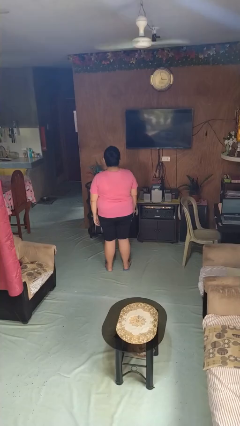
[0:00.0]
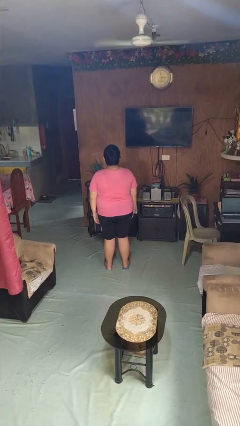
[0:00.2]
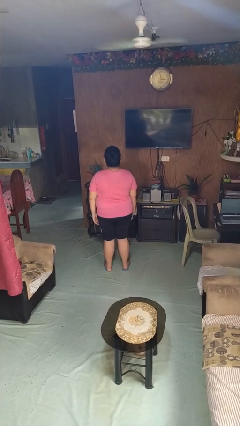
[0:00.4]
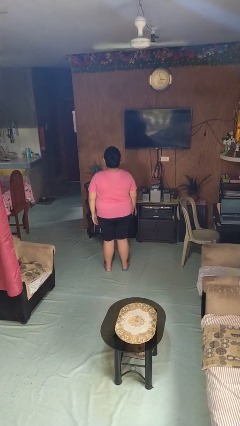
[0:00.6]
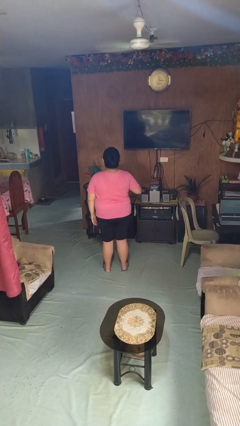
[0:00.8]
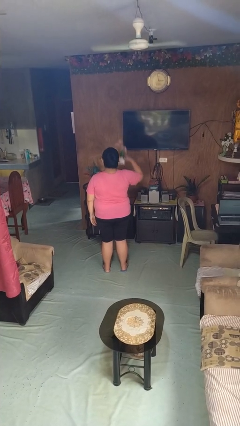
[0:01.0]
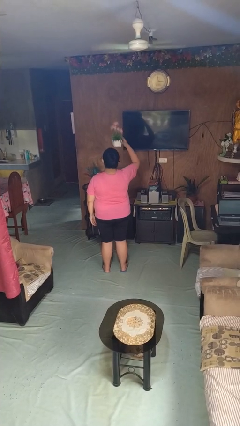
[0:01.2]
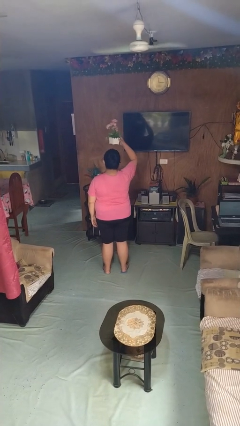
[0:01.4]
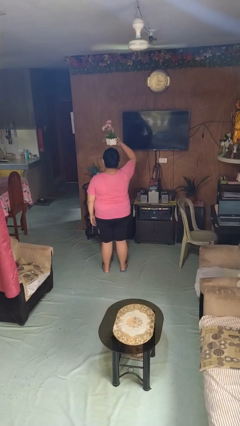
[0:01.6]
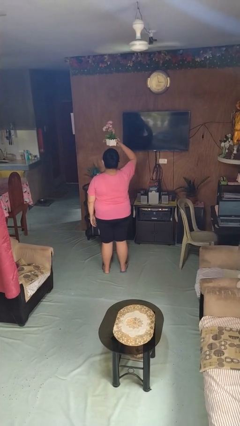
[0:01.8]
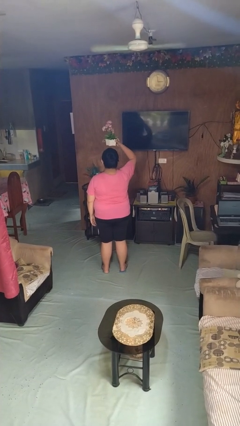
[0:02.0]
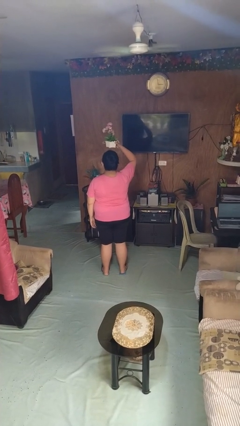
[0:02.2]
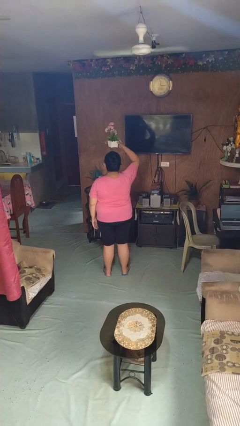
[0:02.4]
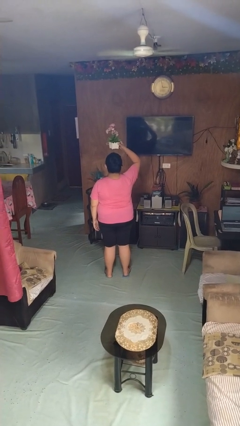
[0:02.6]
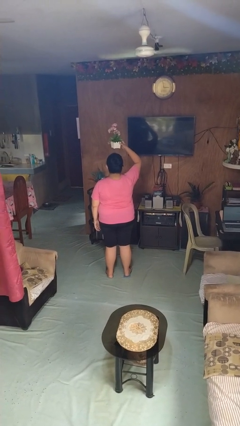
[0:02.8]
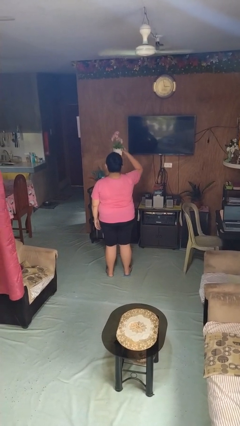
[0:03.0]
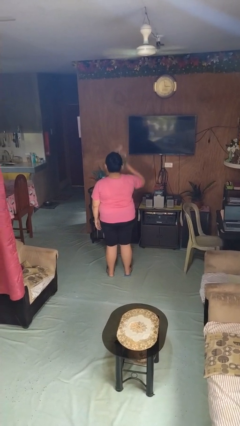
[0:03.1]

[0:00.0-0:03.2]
person holds object above head

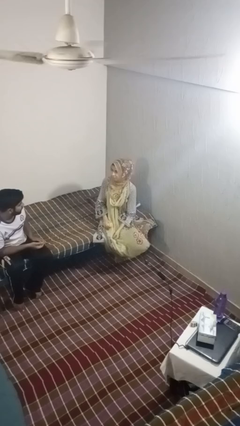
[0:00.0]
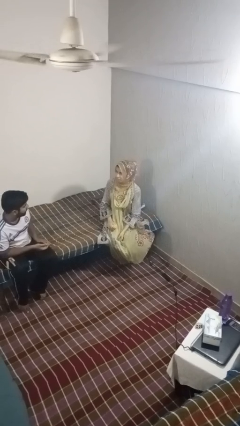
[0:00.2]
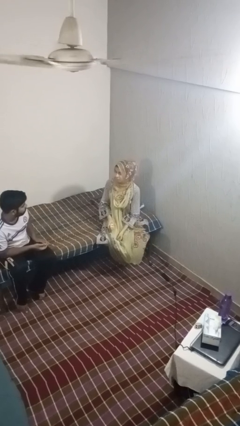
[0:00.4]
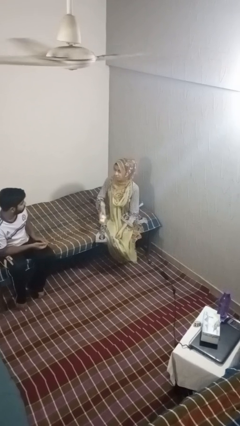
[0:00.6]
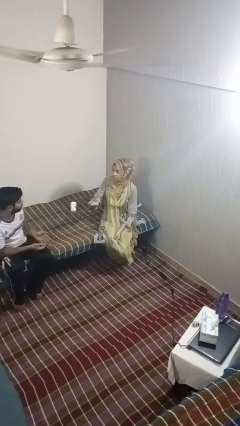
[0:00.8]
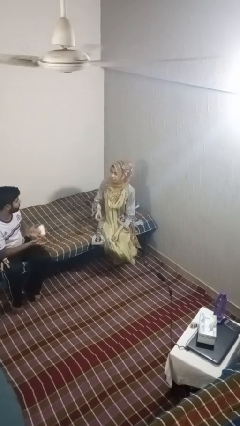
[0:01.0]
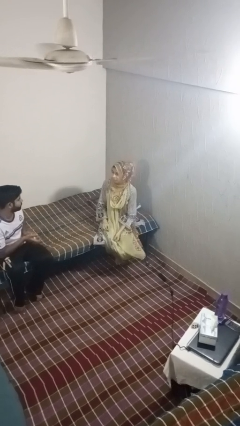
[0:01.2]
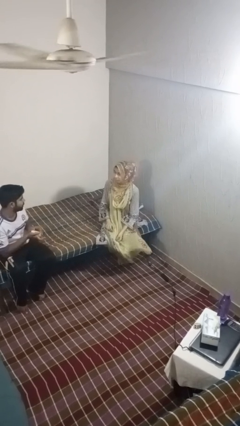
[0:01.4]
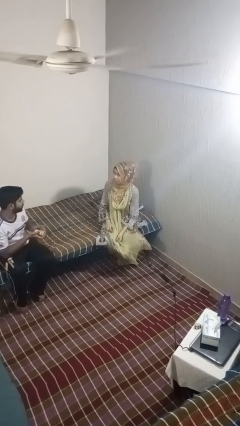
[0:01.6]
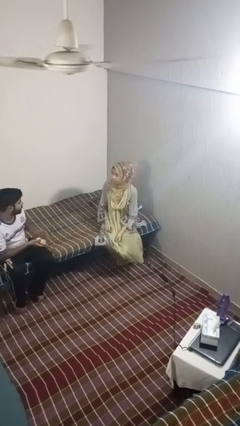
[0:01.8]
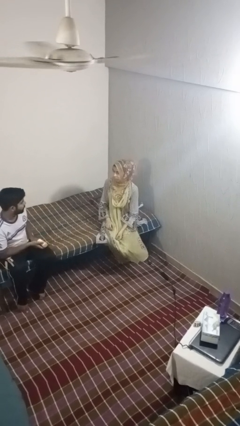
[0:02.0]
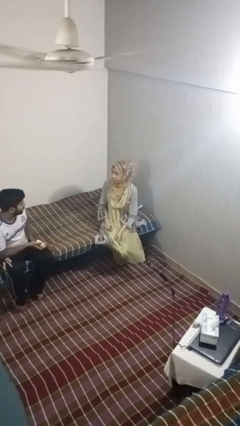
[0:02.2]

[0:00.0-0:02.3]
person throws object to person

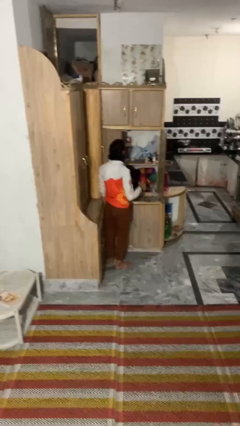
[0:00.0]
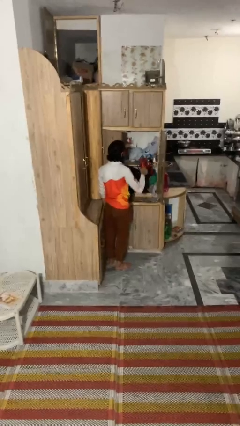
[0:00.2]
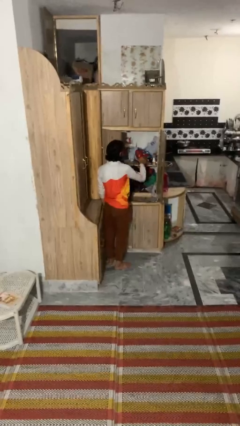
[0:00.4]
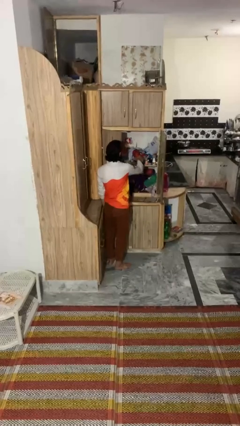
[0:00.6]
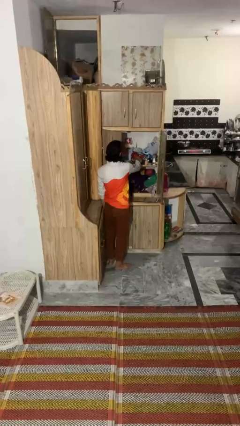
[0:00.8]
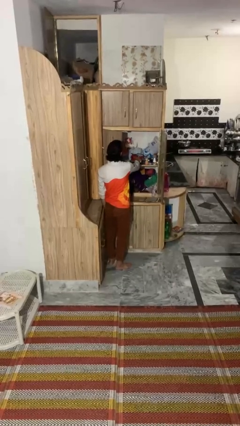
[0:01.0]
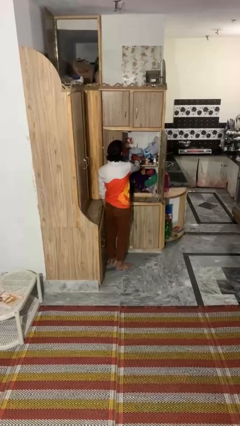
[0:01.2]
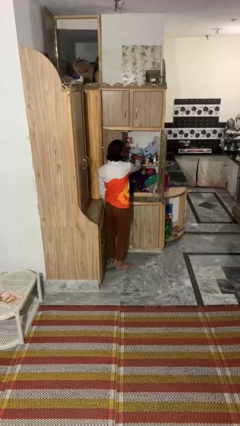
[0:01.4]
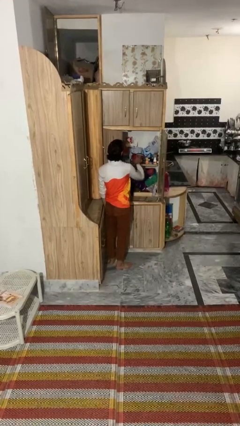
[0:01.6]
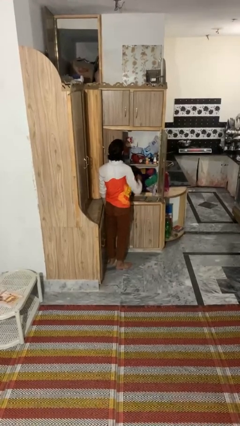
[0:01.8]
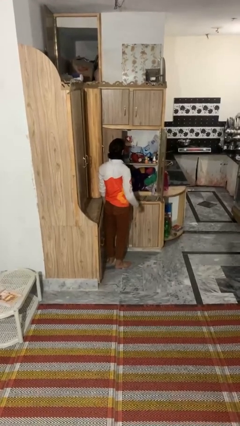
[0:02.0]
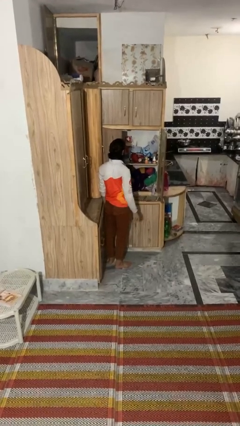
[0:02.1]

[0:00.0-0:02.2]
person puts down object into cabinet

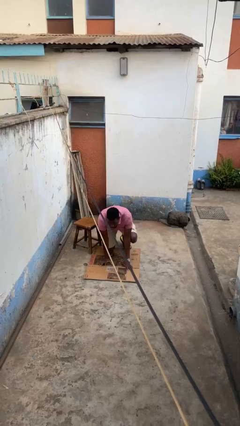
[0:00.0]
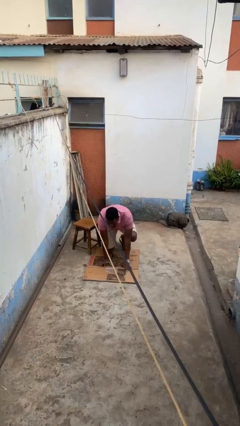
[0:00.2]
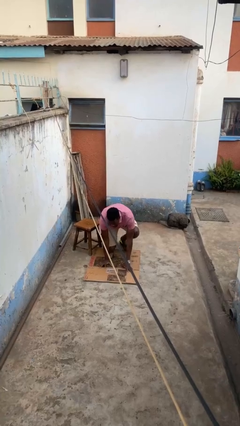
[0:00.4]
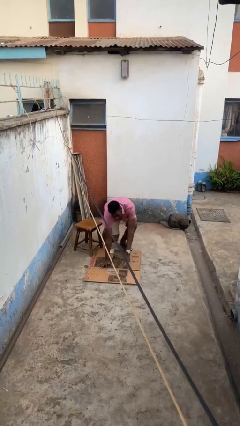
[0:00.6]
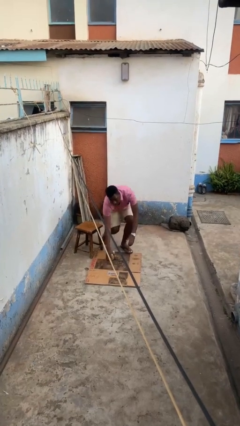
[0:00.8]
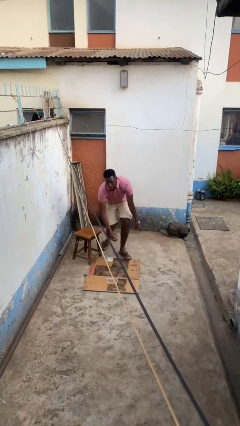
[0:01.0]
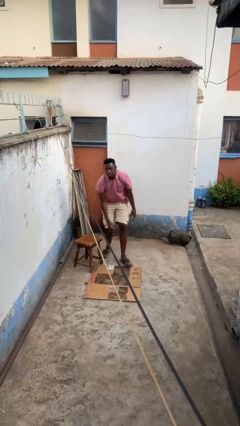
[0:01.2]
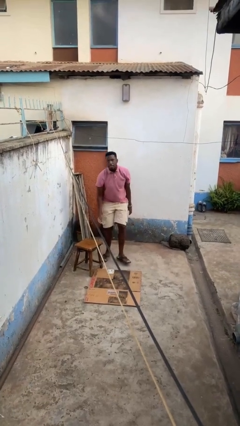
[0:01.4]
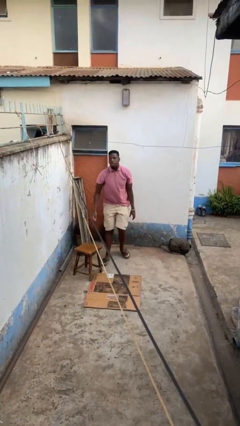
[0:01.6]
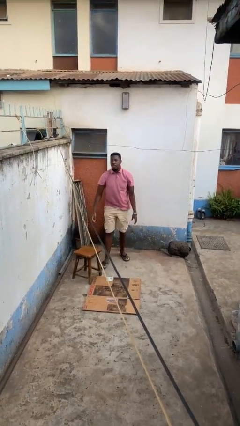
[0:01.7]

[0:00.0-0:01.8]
person stands up from floor

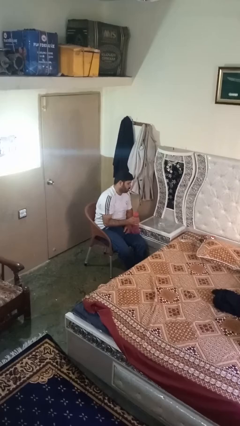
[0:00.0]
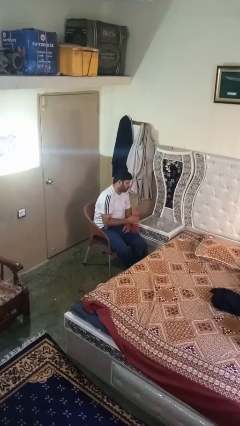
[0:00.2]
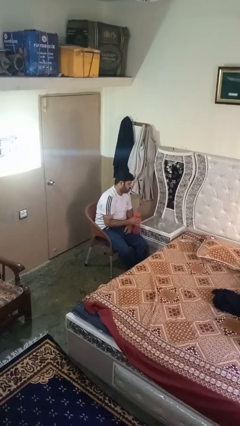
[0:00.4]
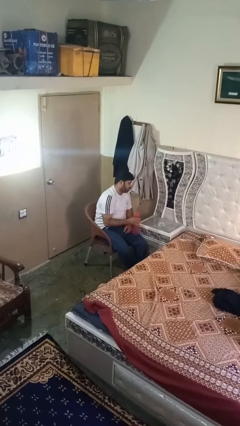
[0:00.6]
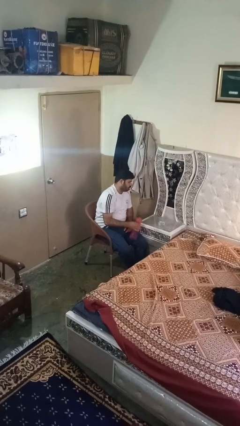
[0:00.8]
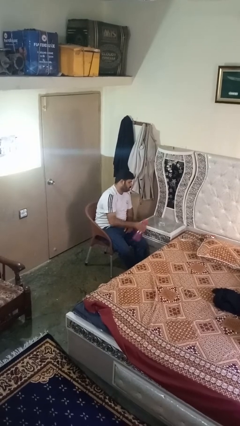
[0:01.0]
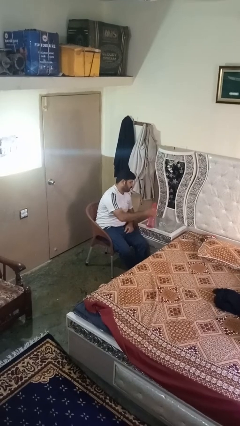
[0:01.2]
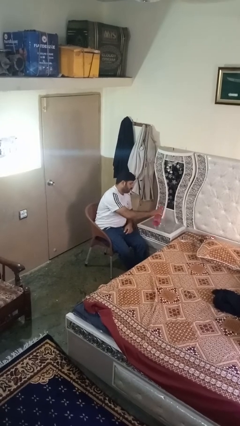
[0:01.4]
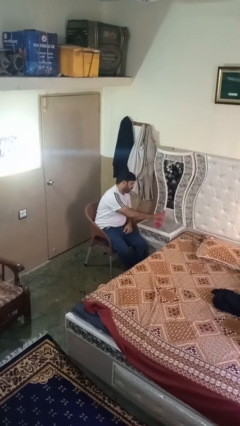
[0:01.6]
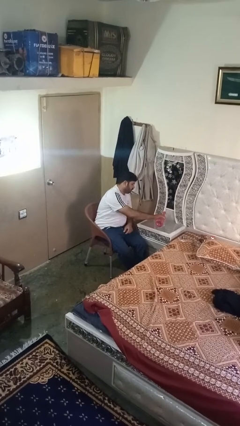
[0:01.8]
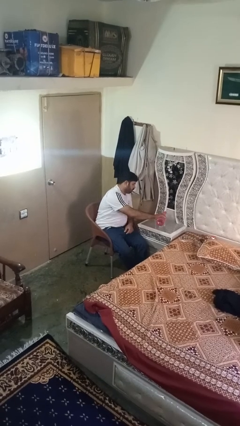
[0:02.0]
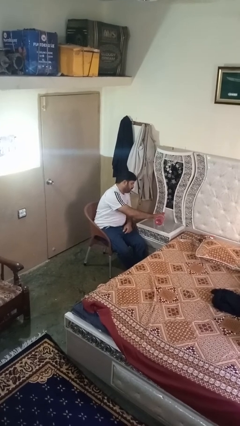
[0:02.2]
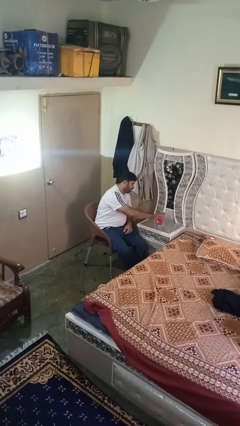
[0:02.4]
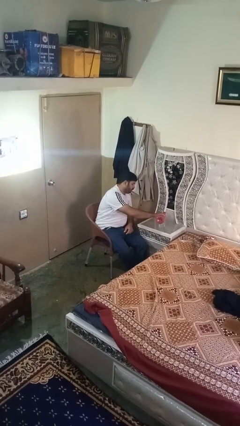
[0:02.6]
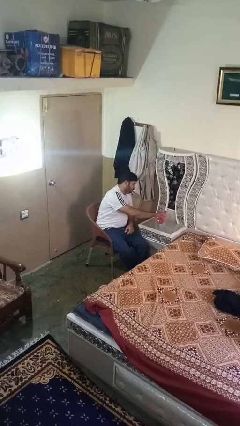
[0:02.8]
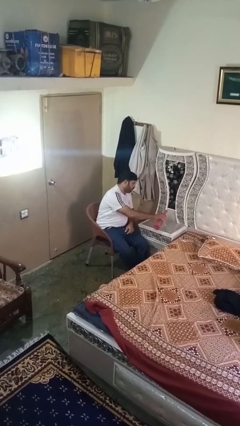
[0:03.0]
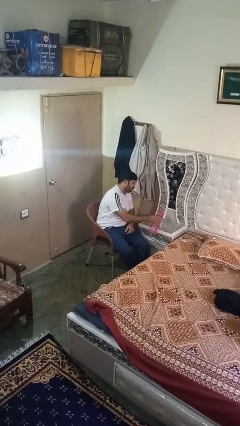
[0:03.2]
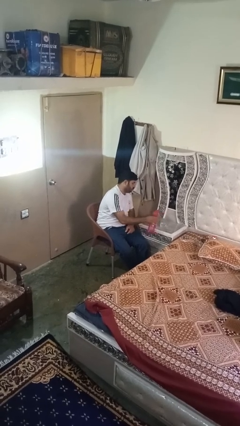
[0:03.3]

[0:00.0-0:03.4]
person pours liquid into cup

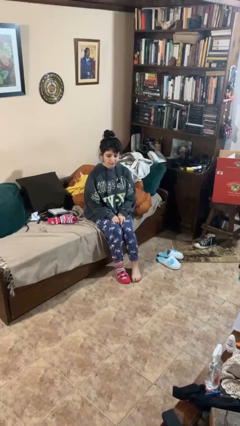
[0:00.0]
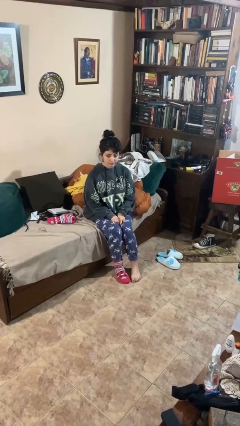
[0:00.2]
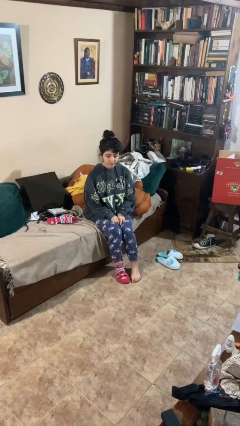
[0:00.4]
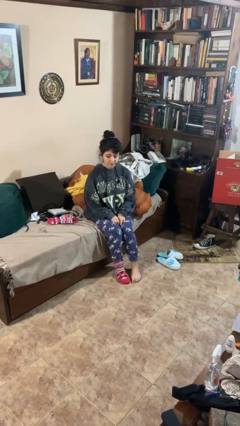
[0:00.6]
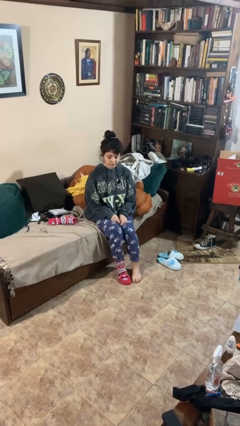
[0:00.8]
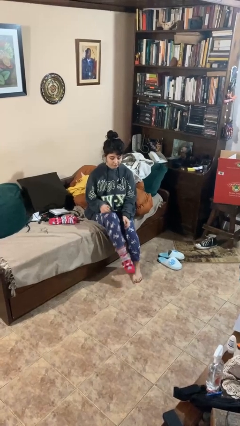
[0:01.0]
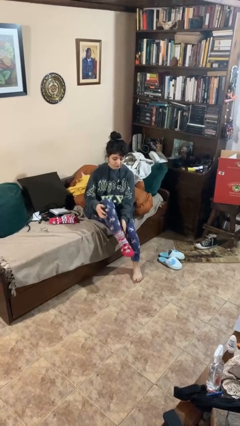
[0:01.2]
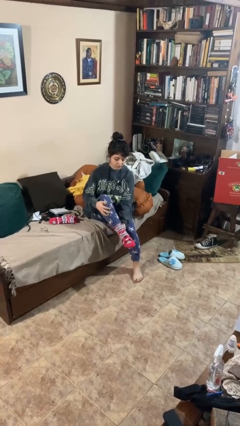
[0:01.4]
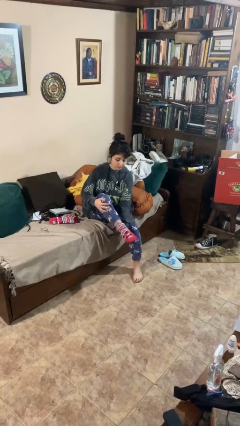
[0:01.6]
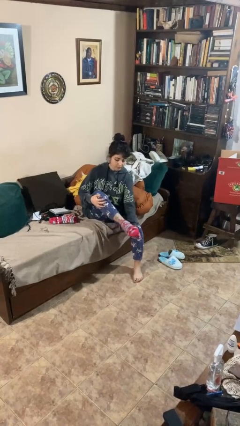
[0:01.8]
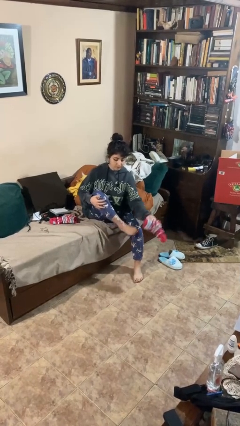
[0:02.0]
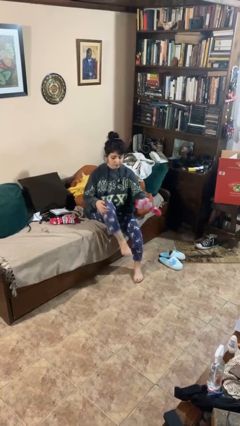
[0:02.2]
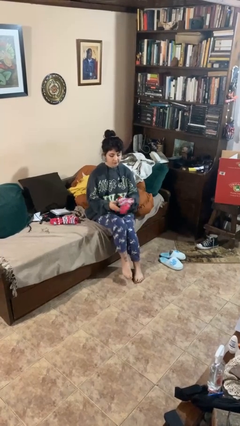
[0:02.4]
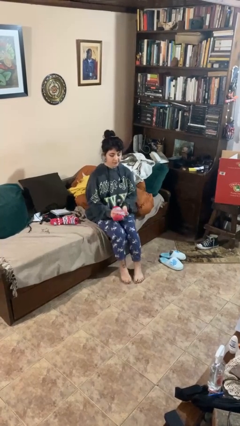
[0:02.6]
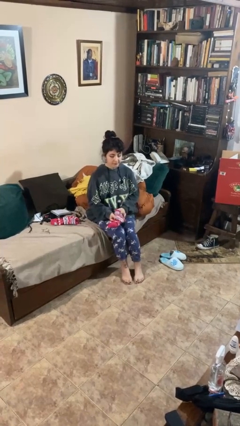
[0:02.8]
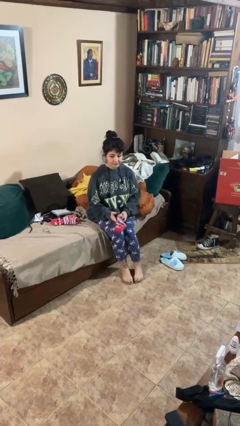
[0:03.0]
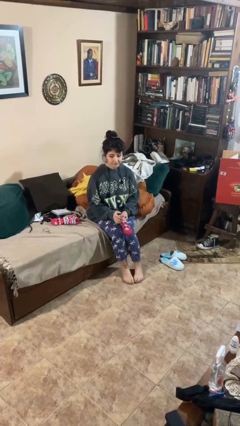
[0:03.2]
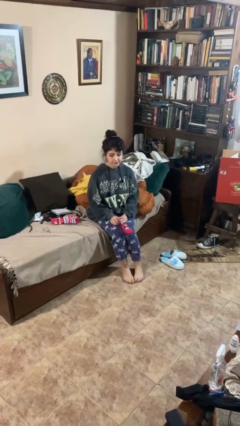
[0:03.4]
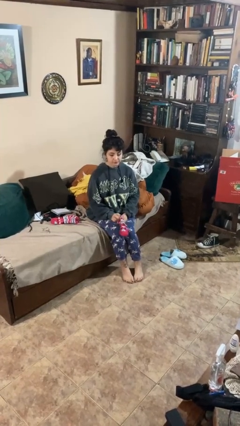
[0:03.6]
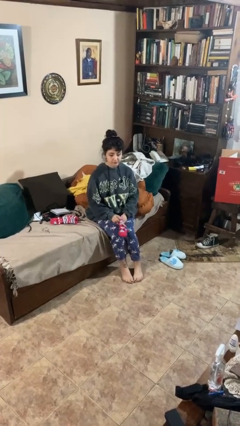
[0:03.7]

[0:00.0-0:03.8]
person takes off socks

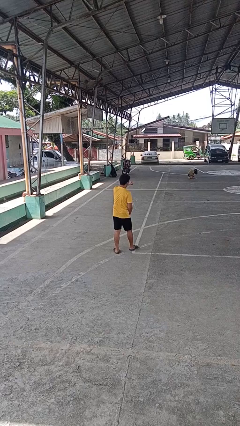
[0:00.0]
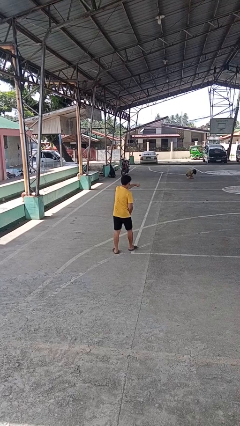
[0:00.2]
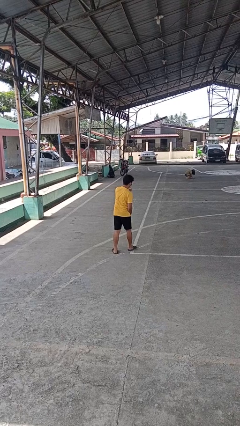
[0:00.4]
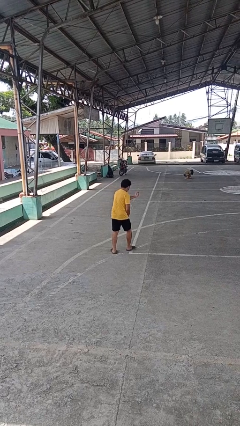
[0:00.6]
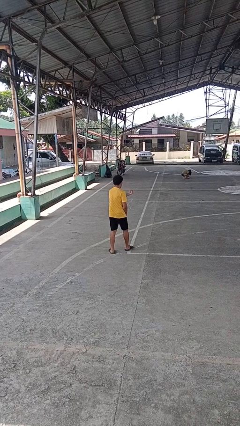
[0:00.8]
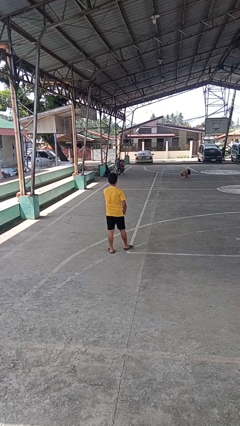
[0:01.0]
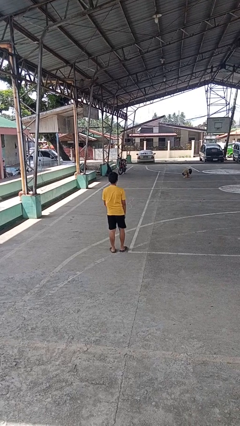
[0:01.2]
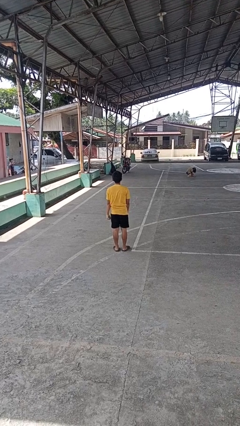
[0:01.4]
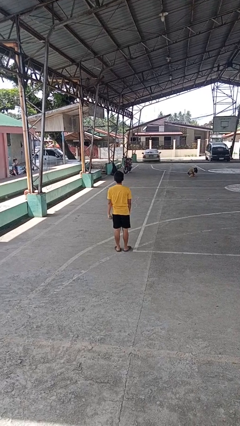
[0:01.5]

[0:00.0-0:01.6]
person punches
